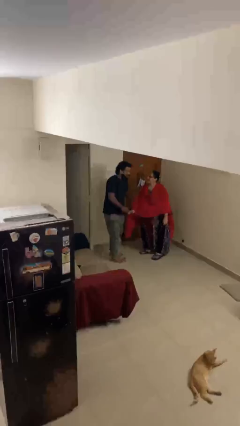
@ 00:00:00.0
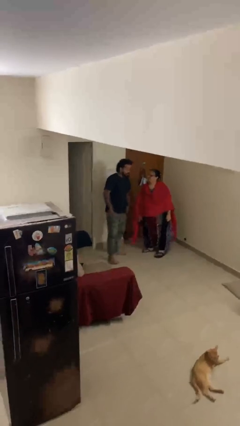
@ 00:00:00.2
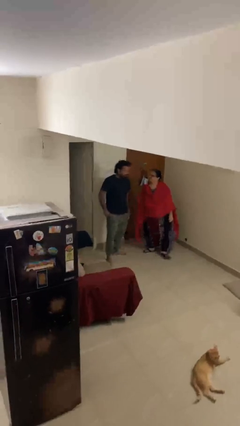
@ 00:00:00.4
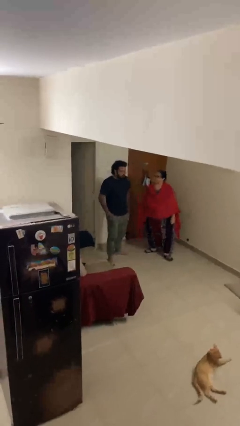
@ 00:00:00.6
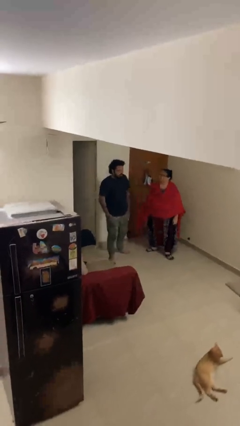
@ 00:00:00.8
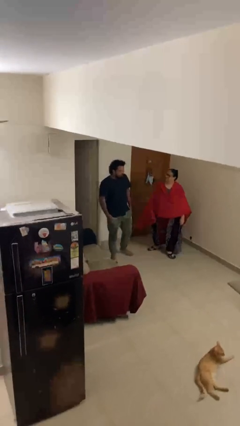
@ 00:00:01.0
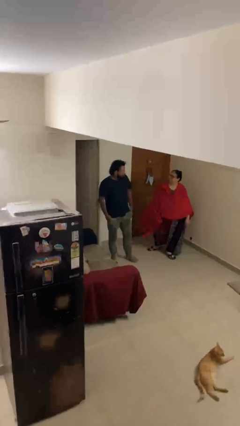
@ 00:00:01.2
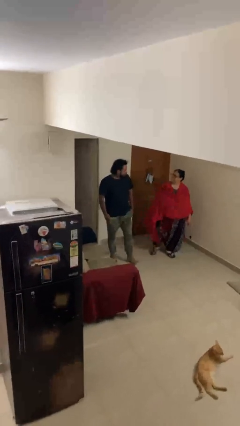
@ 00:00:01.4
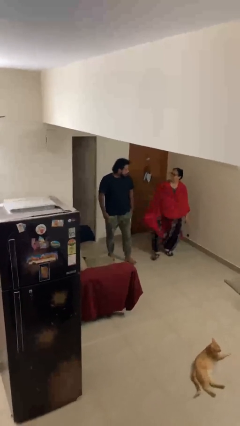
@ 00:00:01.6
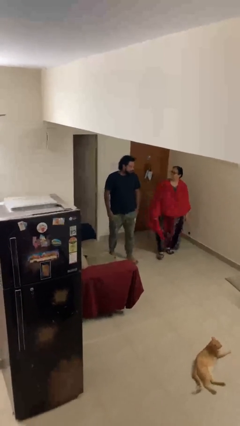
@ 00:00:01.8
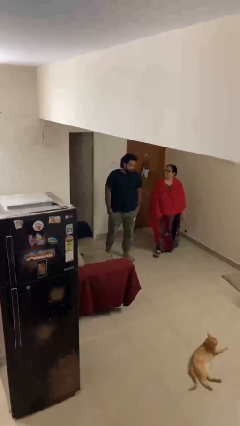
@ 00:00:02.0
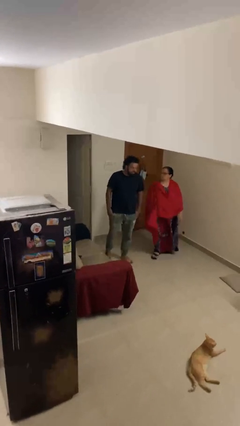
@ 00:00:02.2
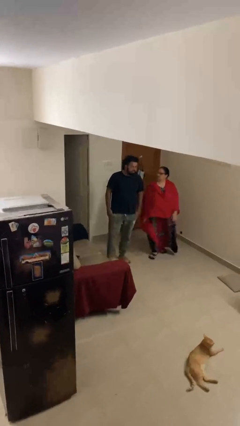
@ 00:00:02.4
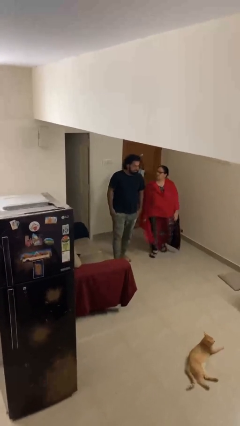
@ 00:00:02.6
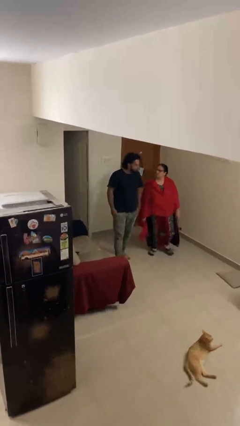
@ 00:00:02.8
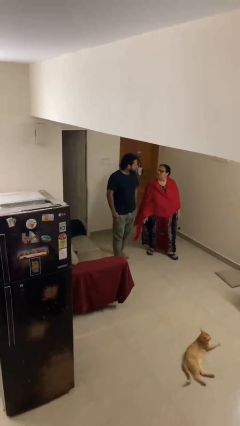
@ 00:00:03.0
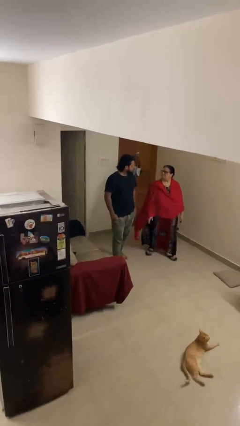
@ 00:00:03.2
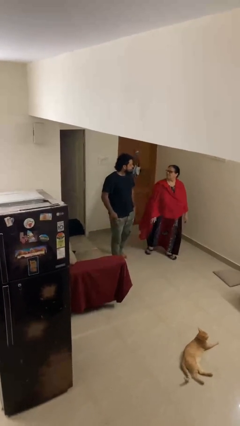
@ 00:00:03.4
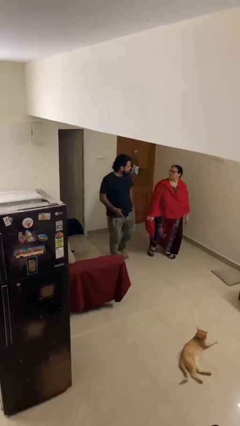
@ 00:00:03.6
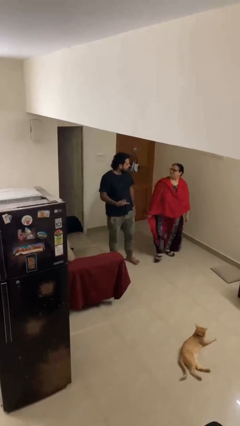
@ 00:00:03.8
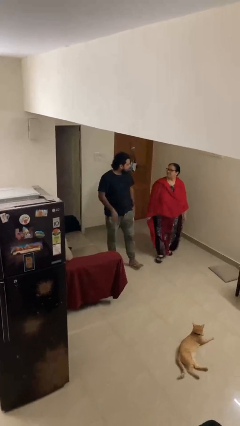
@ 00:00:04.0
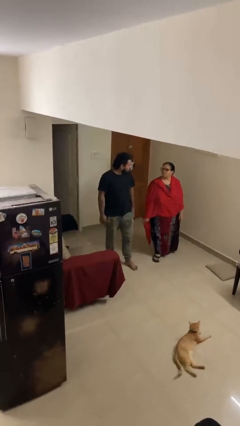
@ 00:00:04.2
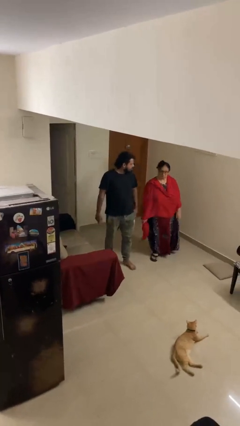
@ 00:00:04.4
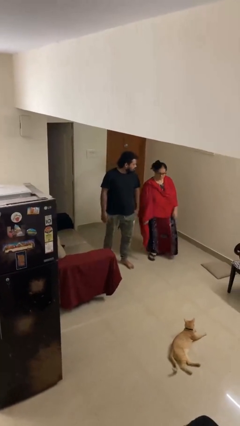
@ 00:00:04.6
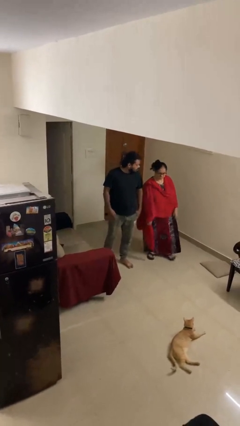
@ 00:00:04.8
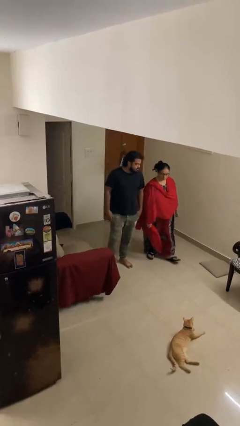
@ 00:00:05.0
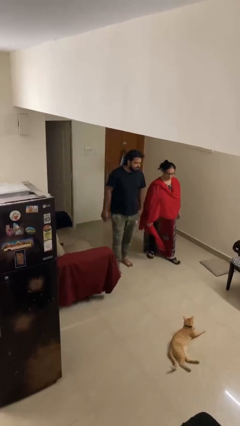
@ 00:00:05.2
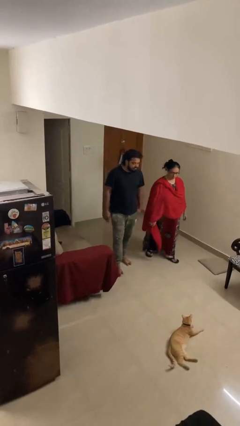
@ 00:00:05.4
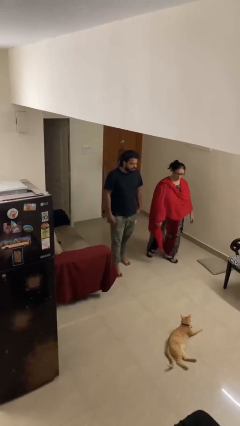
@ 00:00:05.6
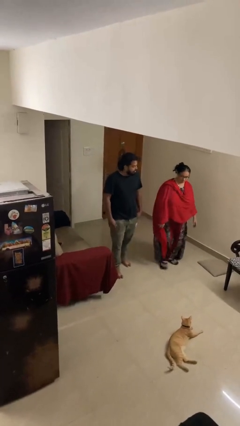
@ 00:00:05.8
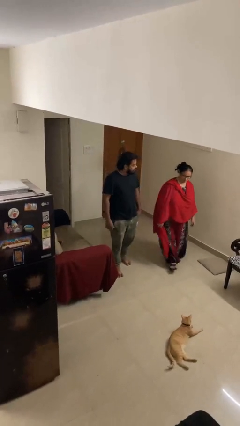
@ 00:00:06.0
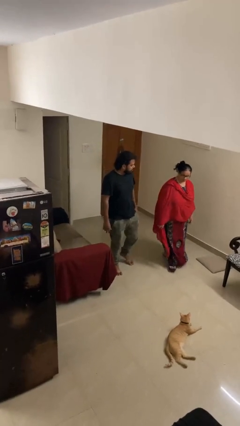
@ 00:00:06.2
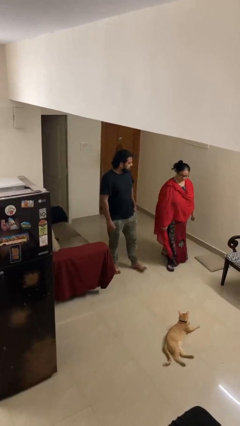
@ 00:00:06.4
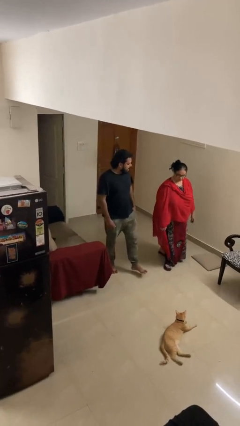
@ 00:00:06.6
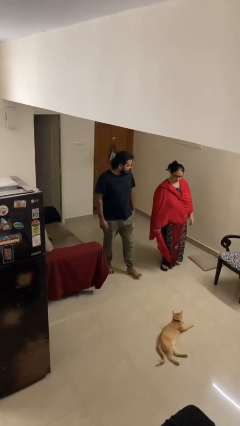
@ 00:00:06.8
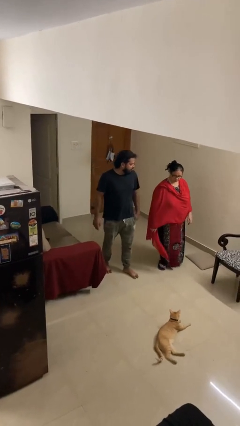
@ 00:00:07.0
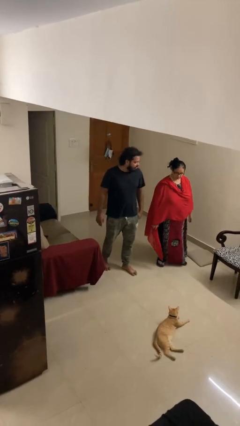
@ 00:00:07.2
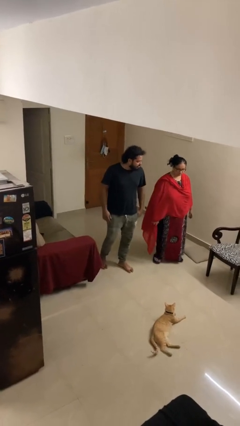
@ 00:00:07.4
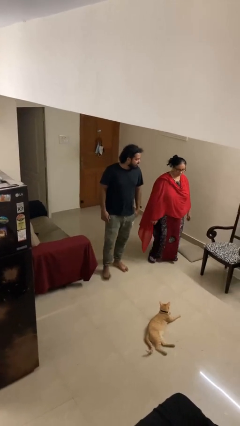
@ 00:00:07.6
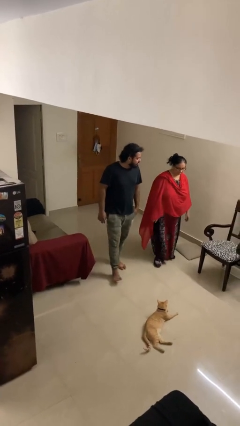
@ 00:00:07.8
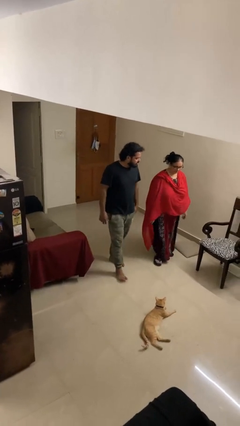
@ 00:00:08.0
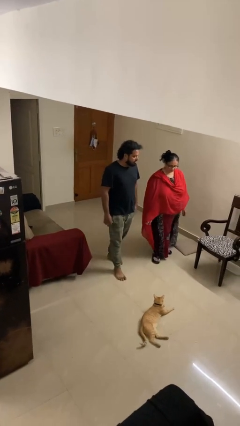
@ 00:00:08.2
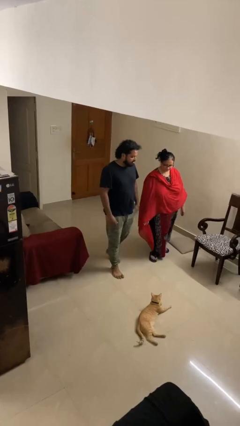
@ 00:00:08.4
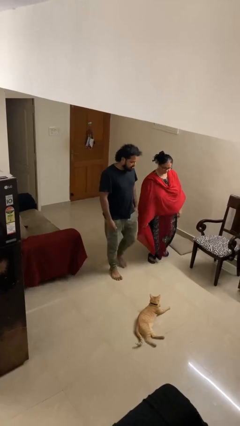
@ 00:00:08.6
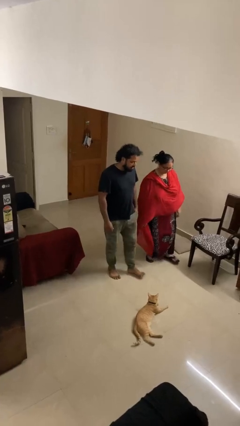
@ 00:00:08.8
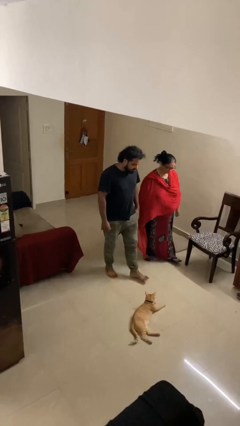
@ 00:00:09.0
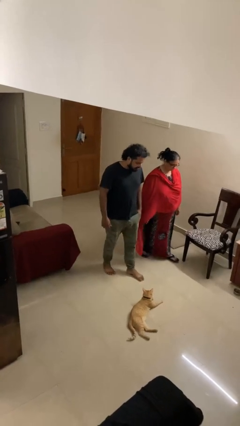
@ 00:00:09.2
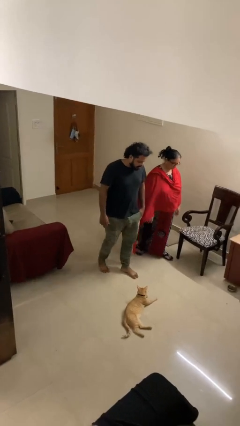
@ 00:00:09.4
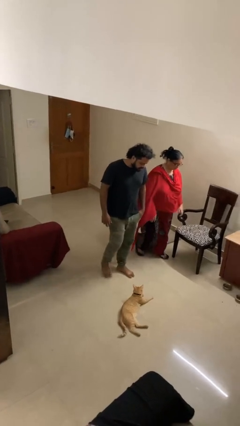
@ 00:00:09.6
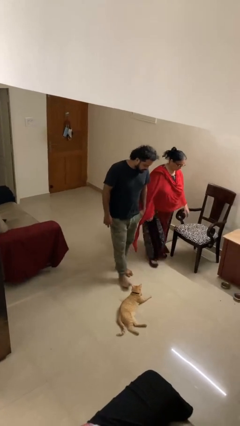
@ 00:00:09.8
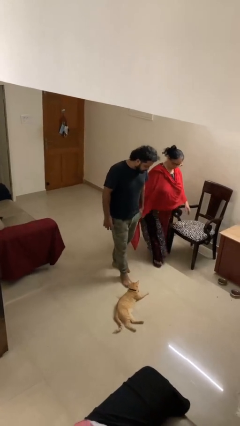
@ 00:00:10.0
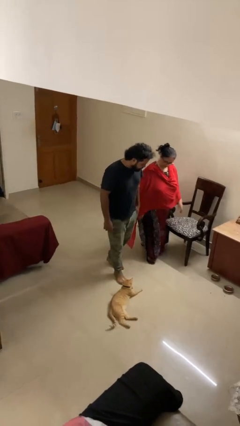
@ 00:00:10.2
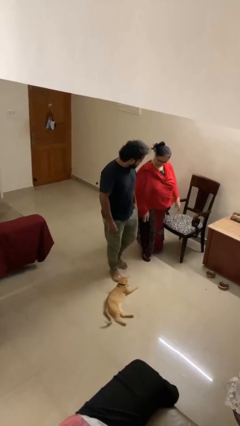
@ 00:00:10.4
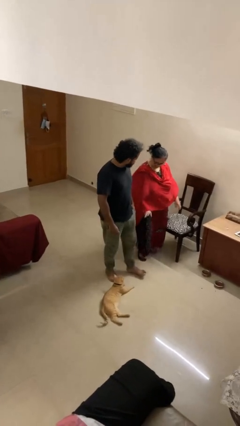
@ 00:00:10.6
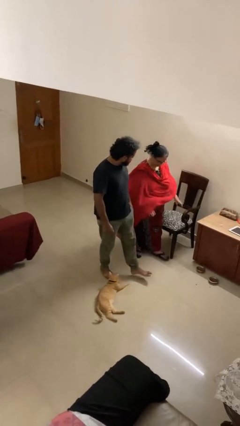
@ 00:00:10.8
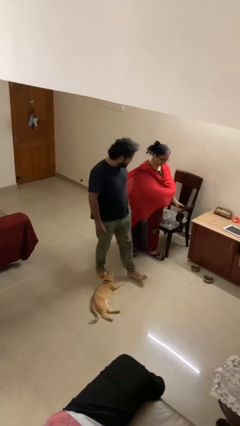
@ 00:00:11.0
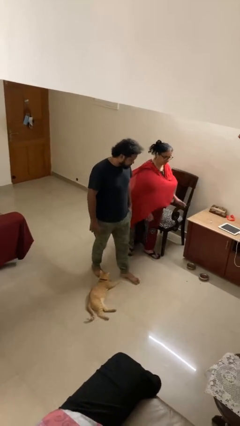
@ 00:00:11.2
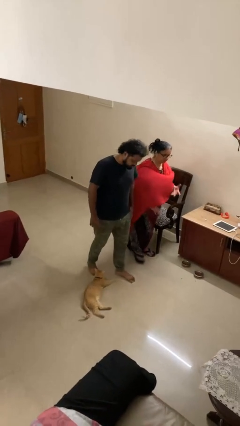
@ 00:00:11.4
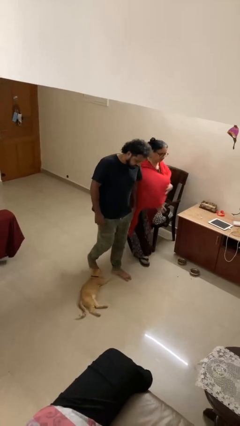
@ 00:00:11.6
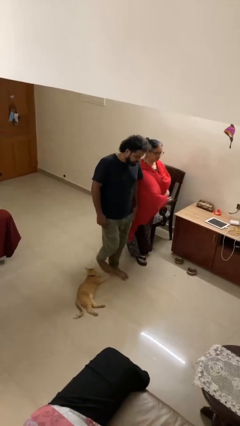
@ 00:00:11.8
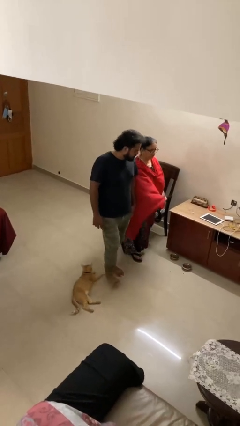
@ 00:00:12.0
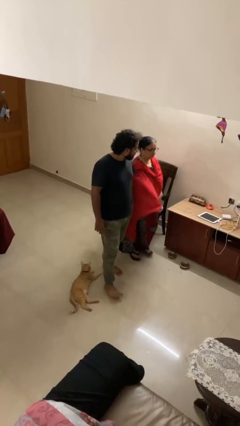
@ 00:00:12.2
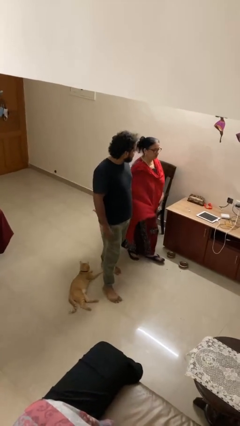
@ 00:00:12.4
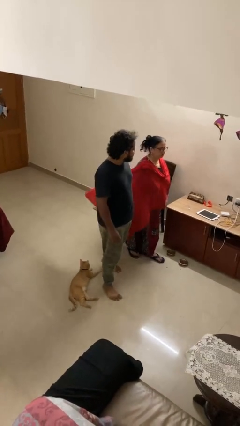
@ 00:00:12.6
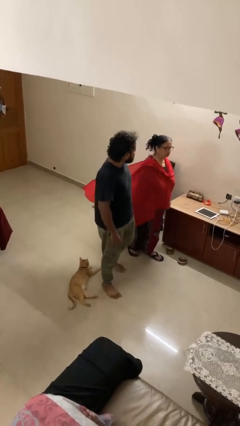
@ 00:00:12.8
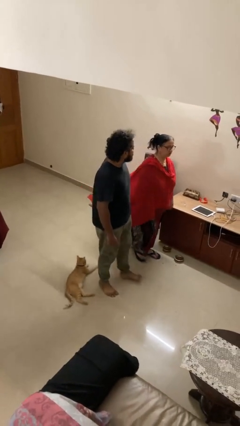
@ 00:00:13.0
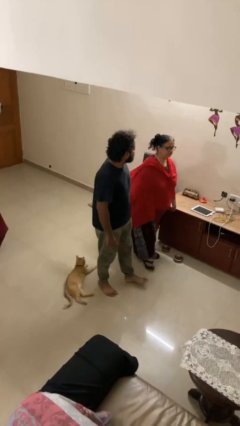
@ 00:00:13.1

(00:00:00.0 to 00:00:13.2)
person talks to person

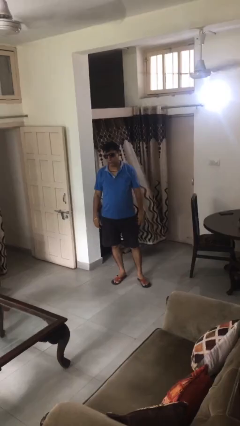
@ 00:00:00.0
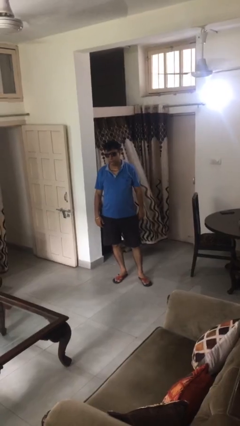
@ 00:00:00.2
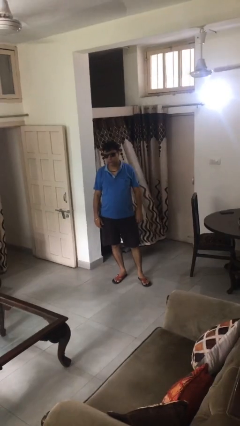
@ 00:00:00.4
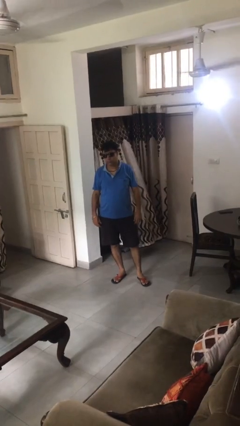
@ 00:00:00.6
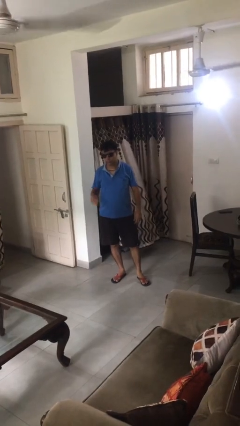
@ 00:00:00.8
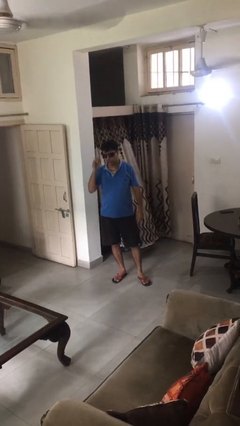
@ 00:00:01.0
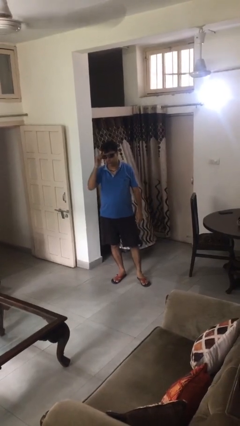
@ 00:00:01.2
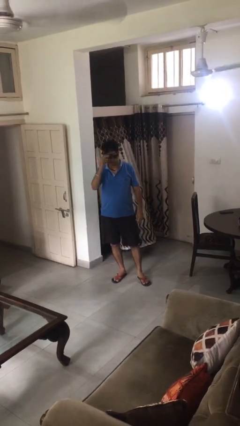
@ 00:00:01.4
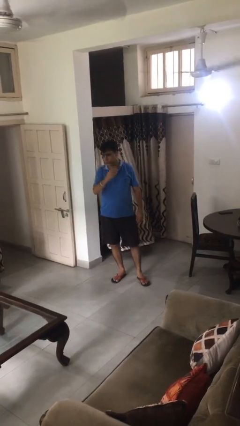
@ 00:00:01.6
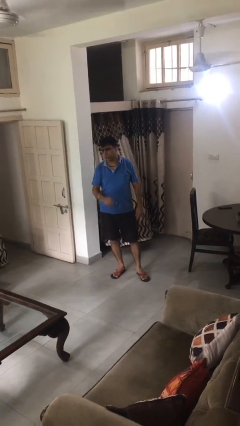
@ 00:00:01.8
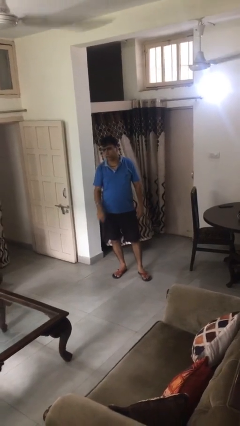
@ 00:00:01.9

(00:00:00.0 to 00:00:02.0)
person takes off sunglasses

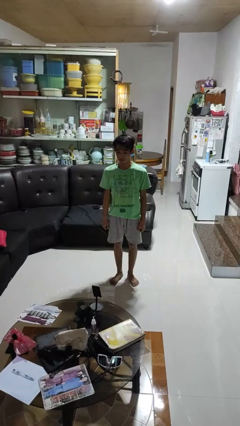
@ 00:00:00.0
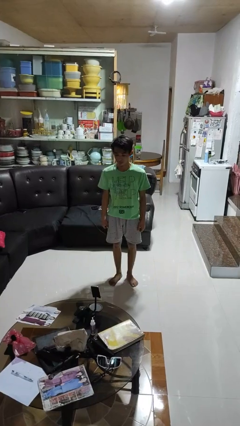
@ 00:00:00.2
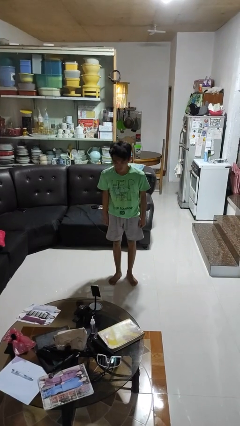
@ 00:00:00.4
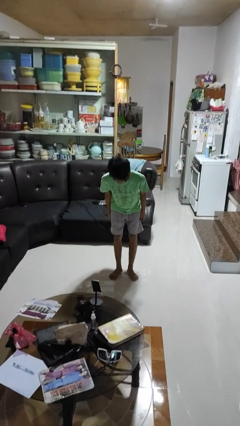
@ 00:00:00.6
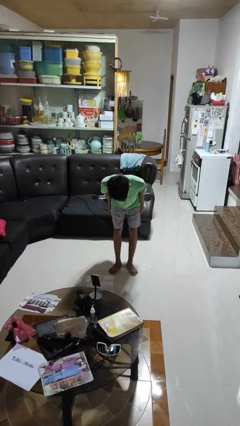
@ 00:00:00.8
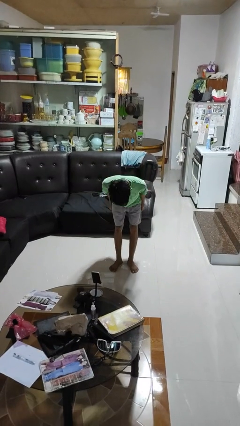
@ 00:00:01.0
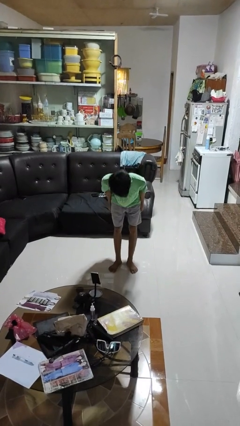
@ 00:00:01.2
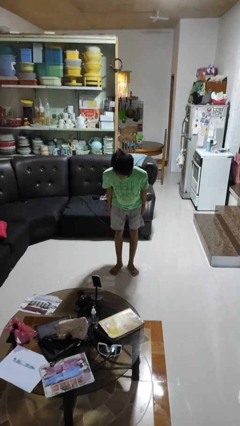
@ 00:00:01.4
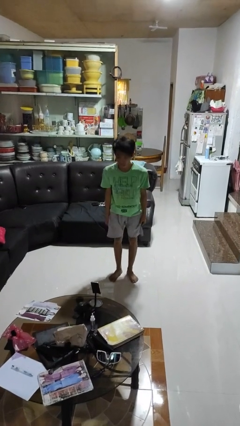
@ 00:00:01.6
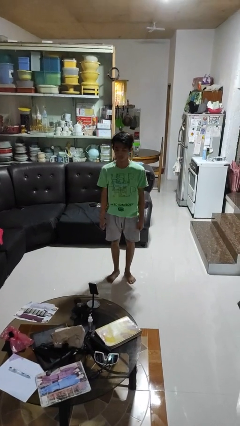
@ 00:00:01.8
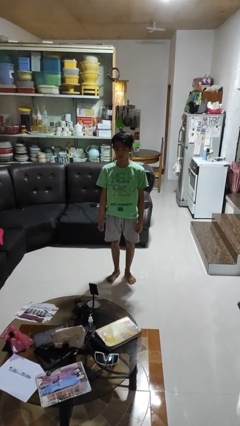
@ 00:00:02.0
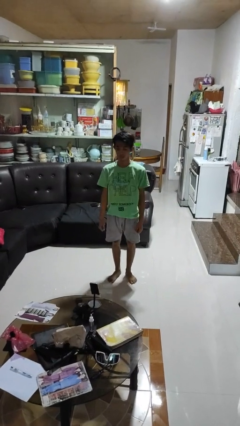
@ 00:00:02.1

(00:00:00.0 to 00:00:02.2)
person bows
